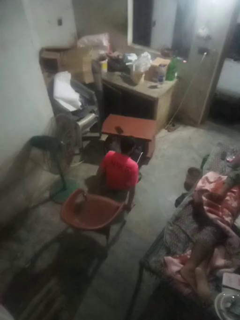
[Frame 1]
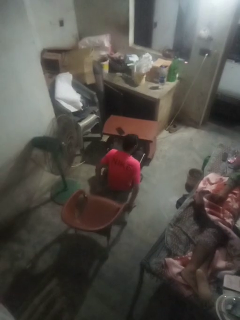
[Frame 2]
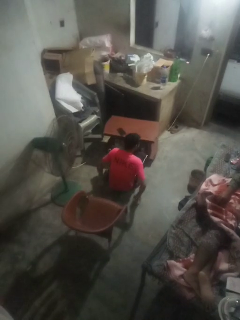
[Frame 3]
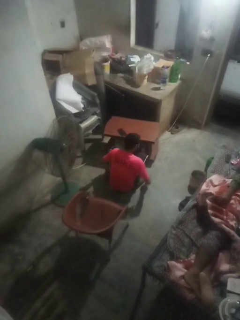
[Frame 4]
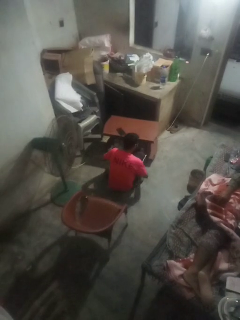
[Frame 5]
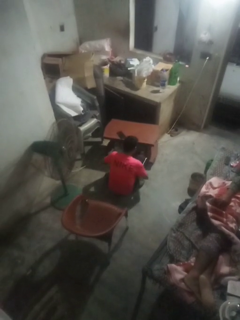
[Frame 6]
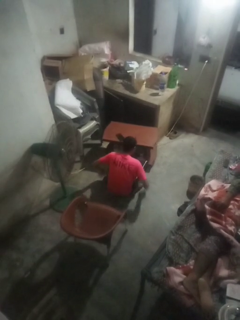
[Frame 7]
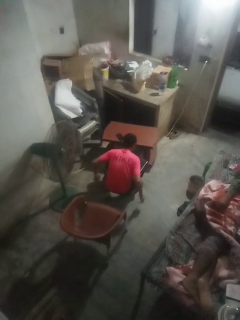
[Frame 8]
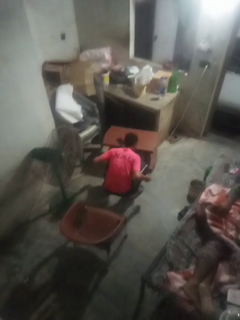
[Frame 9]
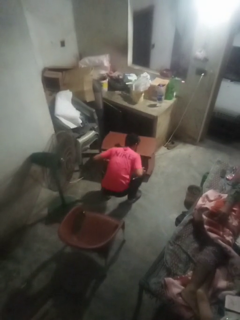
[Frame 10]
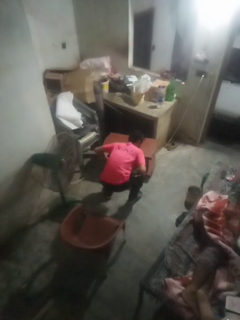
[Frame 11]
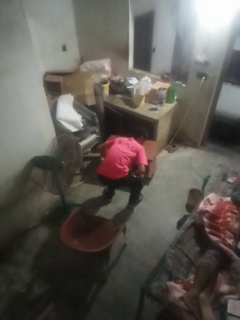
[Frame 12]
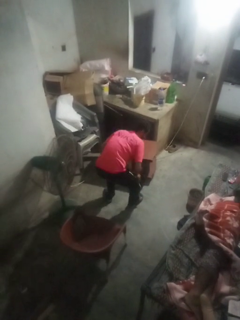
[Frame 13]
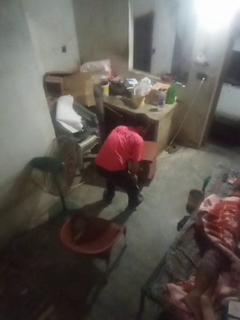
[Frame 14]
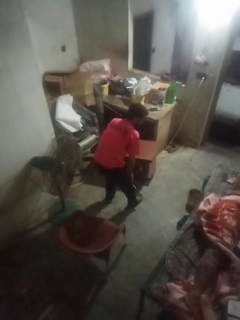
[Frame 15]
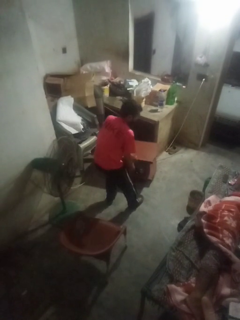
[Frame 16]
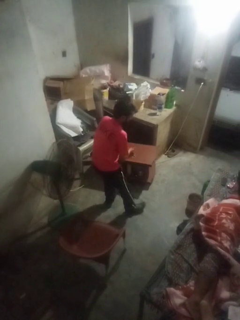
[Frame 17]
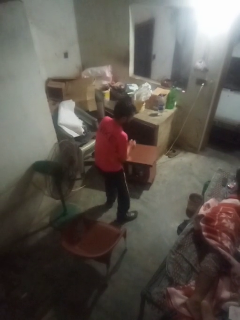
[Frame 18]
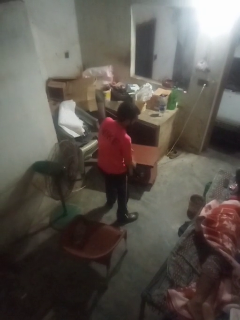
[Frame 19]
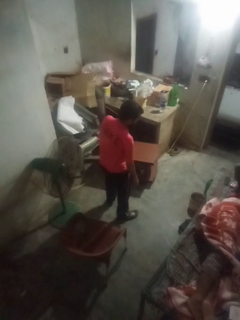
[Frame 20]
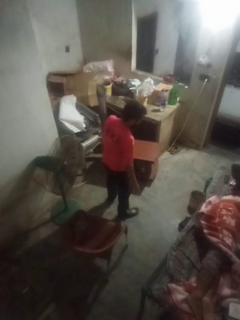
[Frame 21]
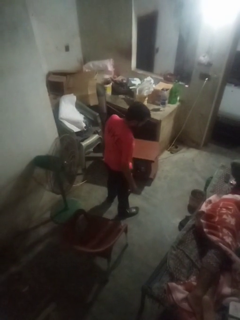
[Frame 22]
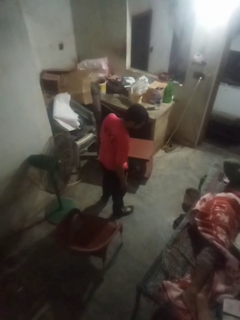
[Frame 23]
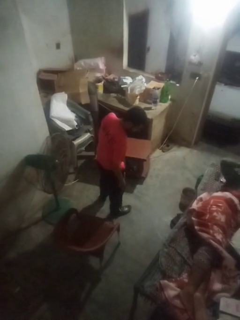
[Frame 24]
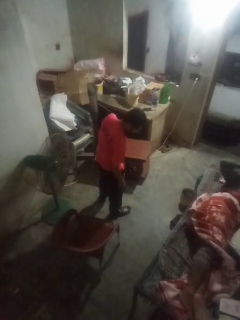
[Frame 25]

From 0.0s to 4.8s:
person stands up from floor

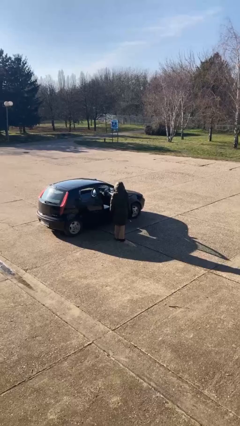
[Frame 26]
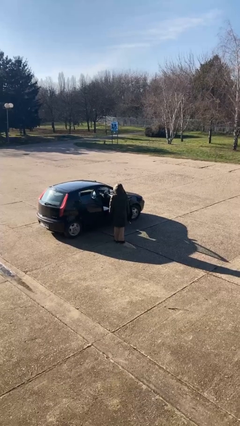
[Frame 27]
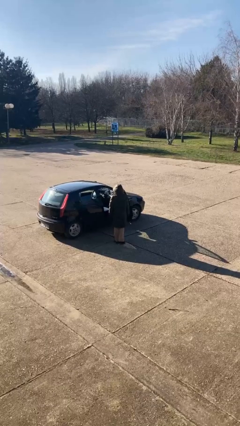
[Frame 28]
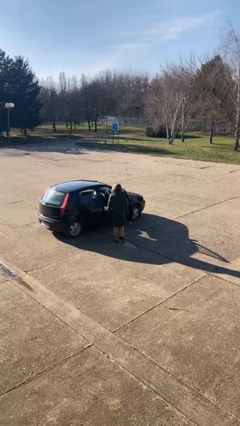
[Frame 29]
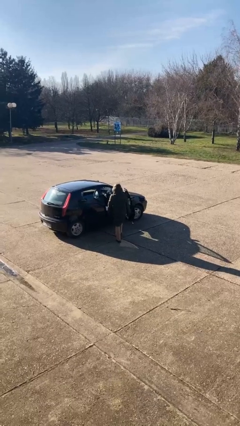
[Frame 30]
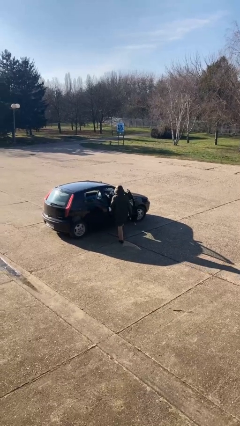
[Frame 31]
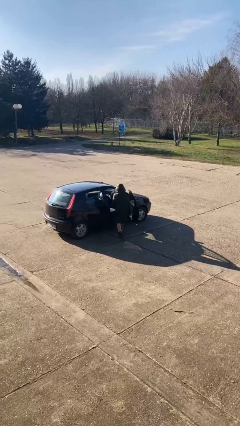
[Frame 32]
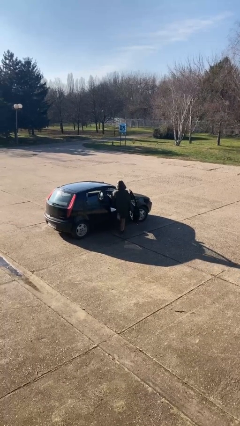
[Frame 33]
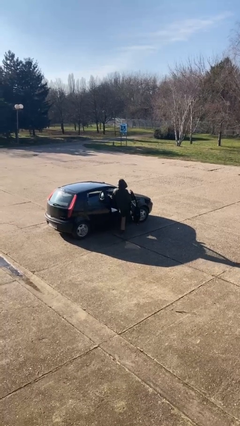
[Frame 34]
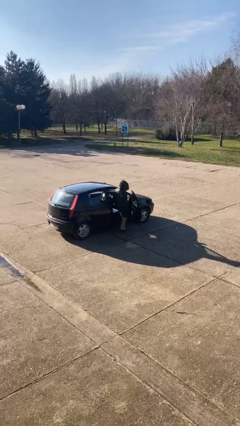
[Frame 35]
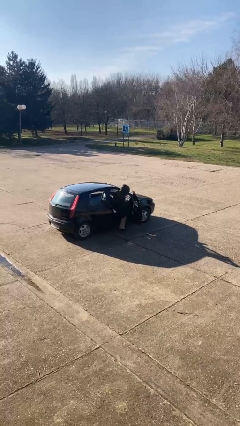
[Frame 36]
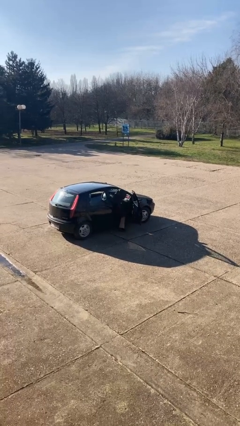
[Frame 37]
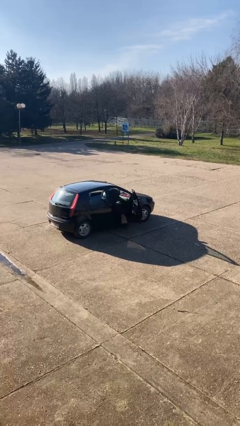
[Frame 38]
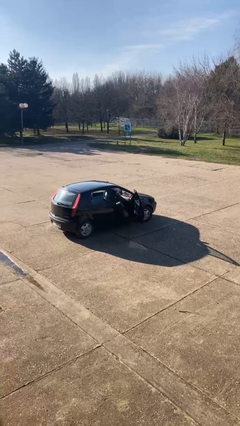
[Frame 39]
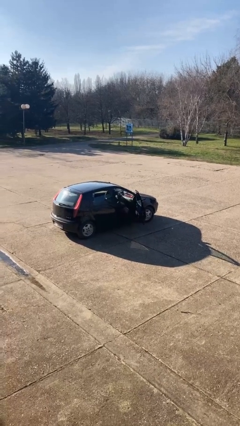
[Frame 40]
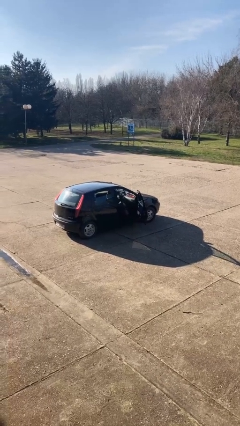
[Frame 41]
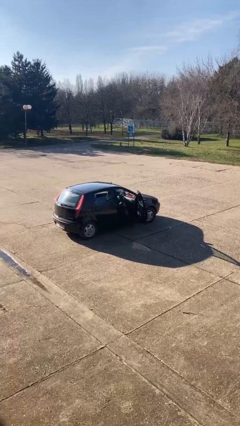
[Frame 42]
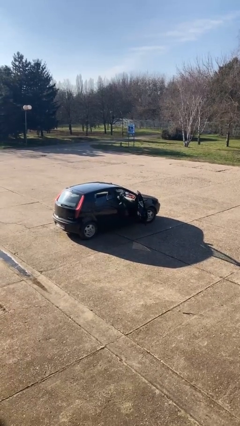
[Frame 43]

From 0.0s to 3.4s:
person enters car

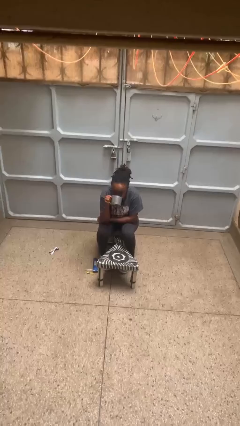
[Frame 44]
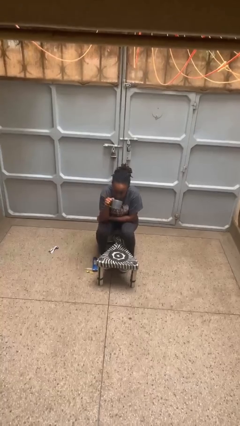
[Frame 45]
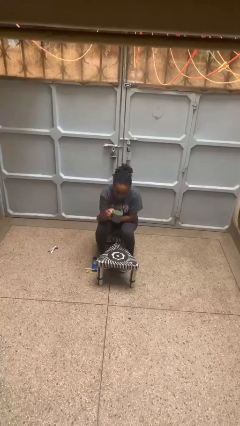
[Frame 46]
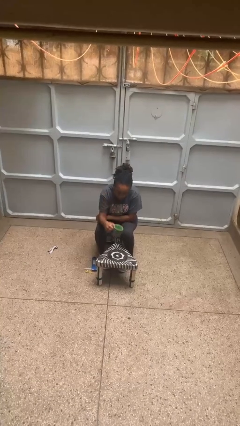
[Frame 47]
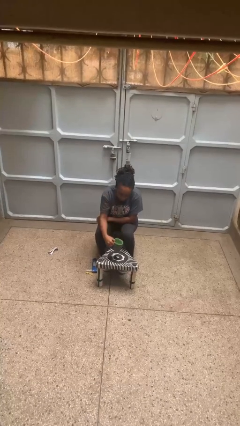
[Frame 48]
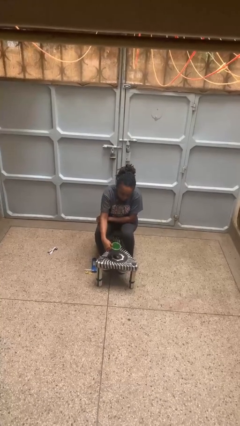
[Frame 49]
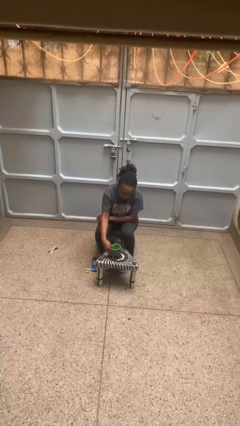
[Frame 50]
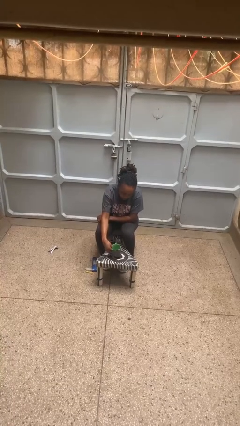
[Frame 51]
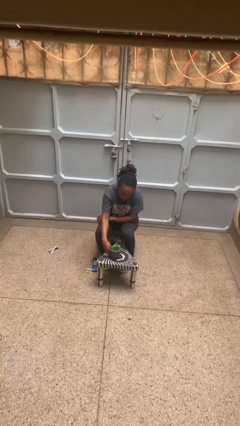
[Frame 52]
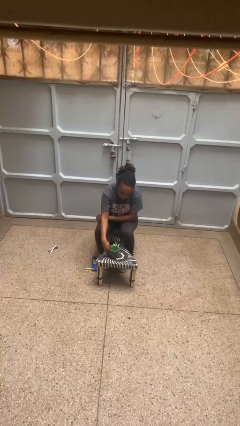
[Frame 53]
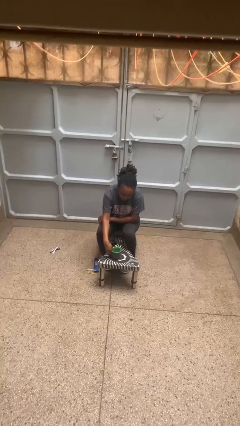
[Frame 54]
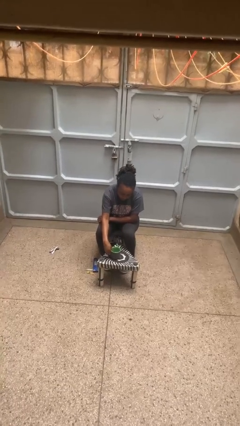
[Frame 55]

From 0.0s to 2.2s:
person puts down object on table

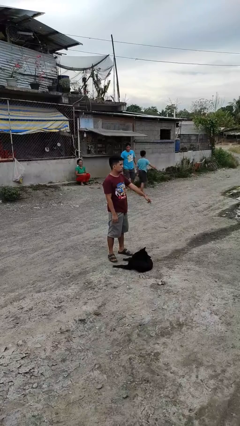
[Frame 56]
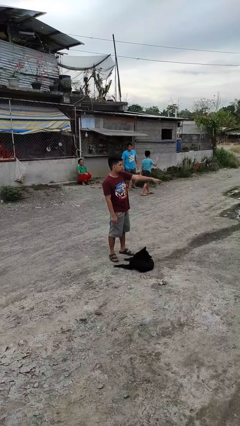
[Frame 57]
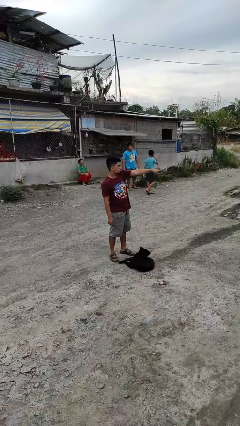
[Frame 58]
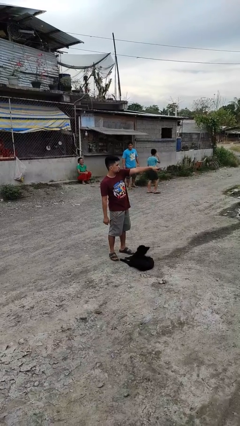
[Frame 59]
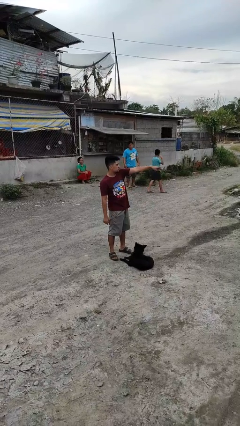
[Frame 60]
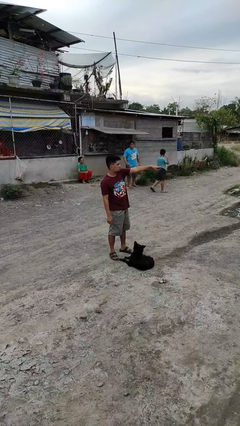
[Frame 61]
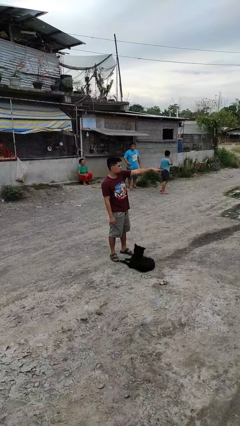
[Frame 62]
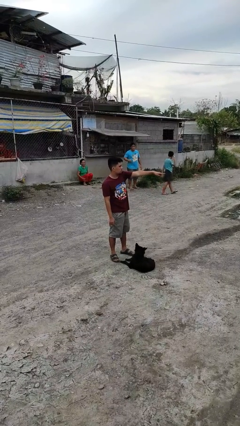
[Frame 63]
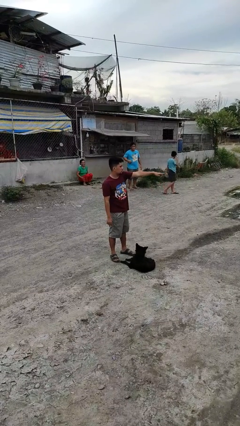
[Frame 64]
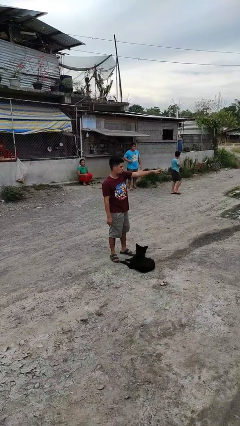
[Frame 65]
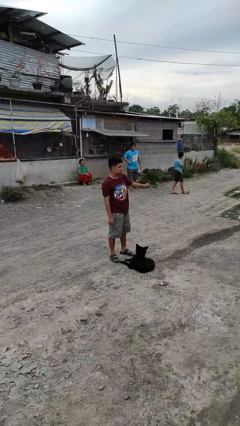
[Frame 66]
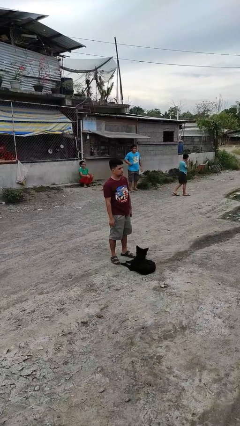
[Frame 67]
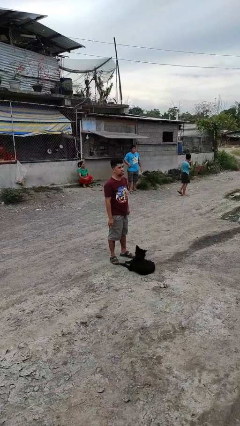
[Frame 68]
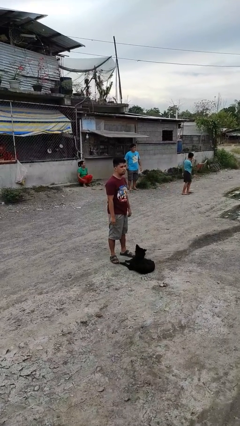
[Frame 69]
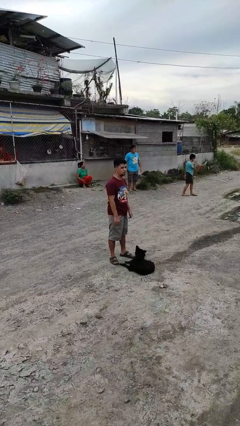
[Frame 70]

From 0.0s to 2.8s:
person points at person

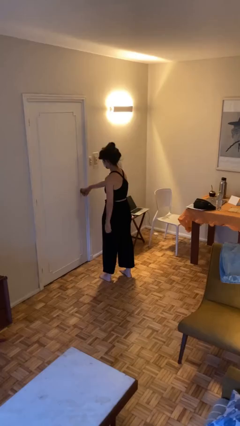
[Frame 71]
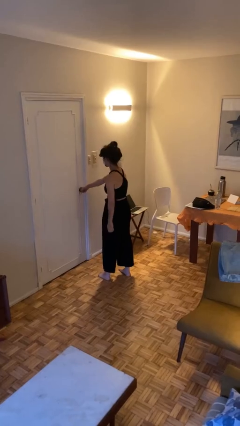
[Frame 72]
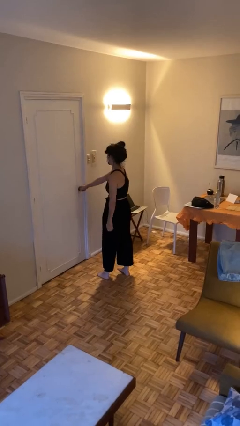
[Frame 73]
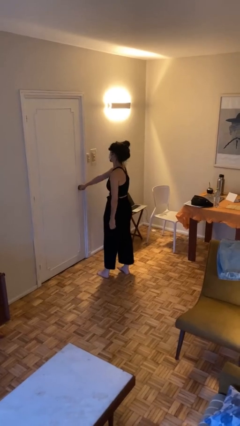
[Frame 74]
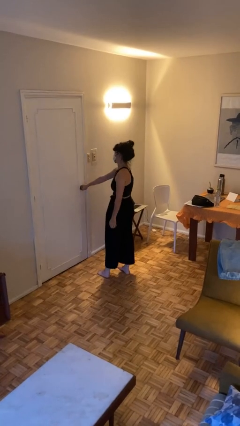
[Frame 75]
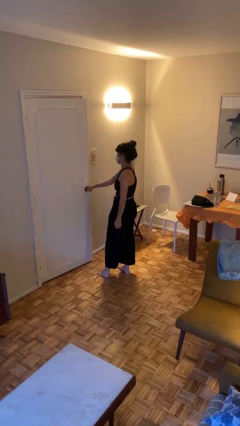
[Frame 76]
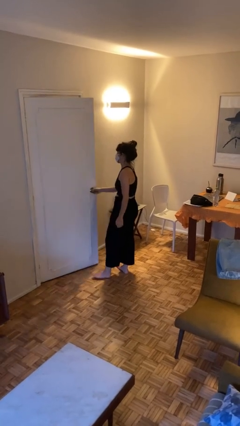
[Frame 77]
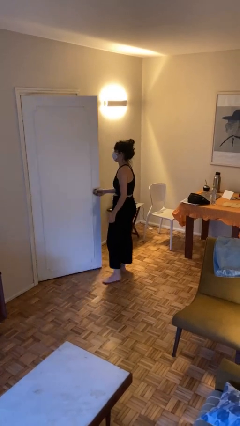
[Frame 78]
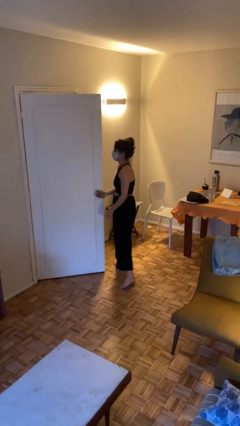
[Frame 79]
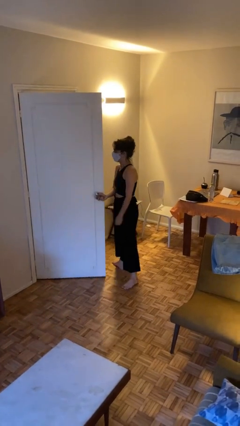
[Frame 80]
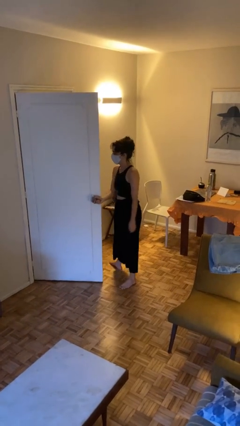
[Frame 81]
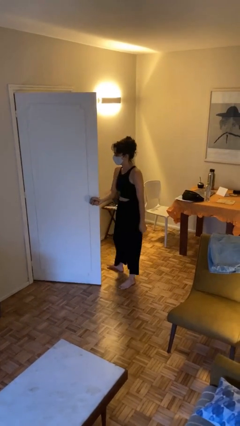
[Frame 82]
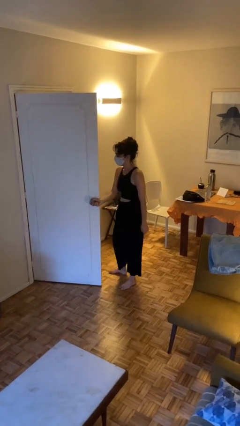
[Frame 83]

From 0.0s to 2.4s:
person opens facility door

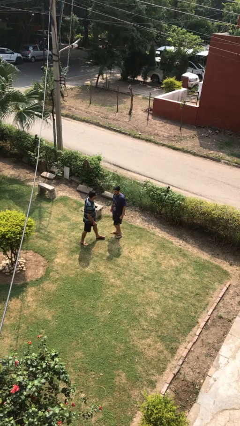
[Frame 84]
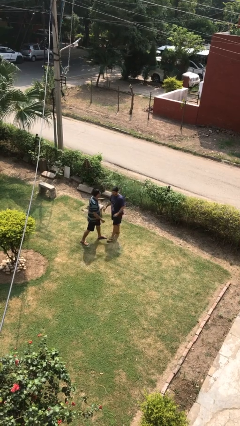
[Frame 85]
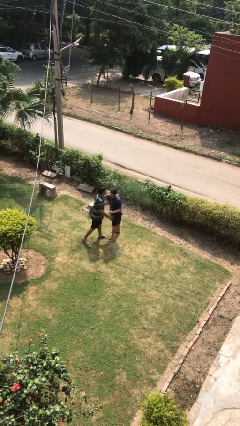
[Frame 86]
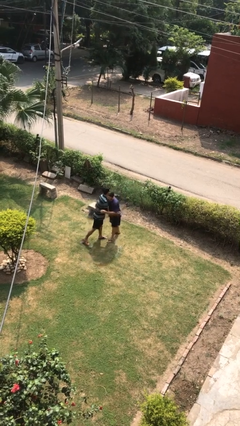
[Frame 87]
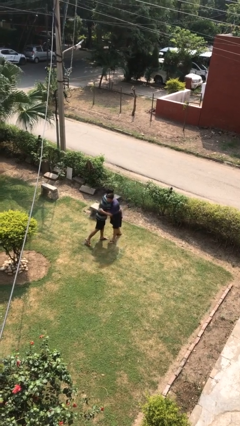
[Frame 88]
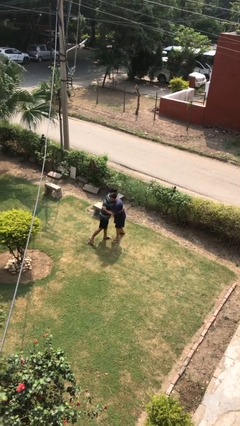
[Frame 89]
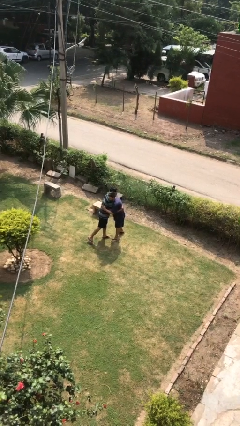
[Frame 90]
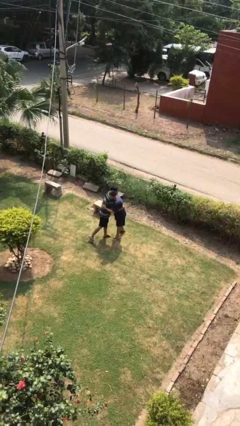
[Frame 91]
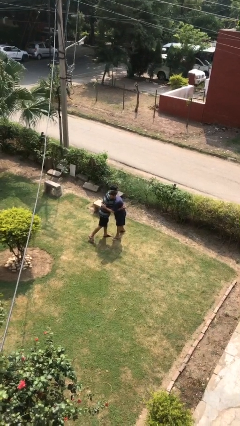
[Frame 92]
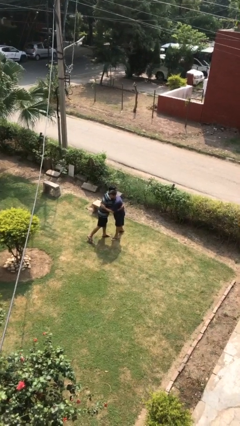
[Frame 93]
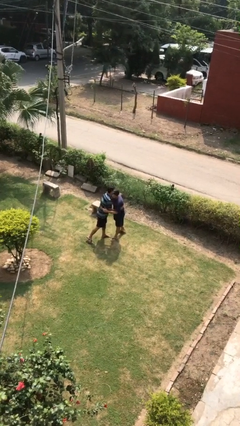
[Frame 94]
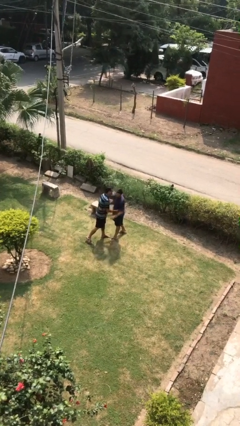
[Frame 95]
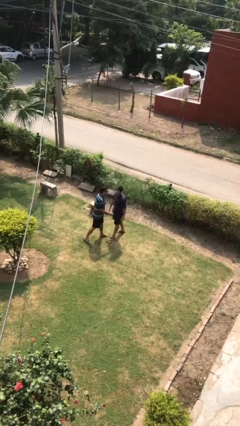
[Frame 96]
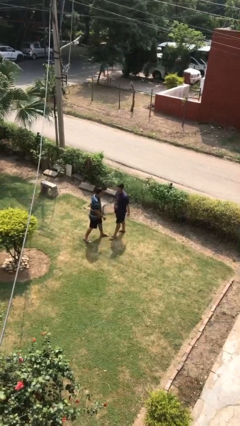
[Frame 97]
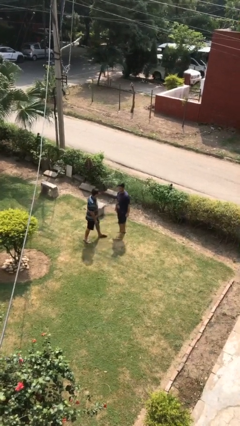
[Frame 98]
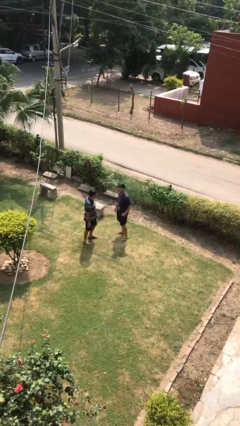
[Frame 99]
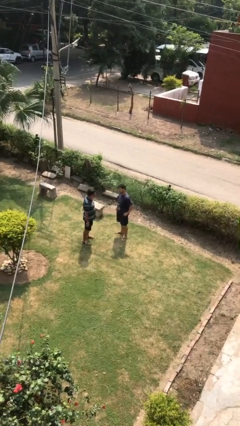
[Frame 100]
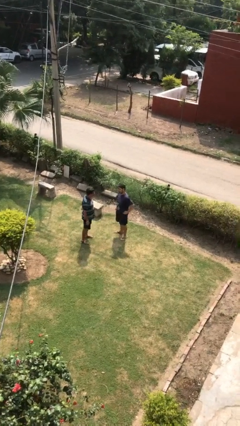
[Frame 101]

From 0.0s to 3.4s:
person embraces person
